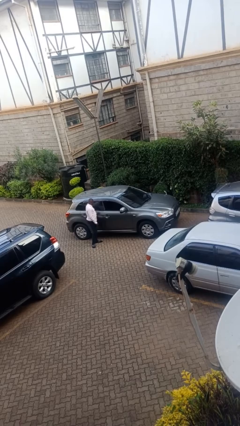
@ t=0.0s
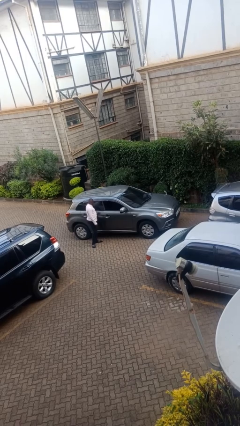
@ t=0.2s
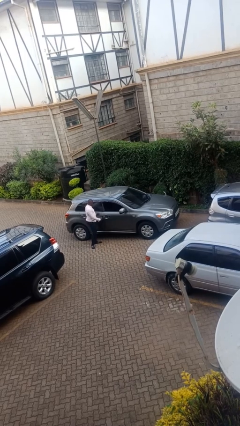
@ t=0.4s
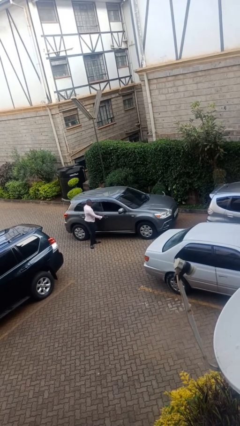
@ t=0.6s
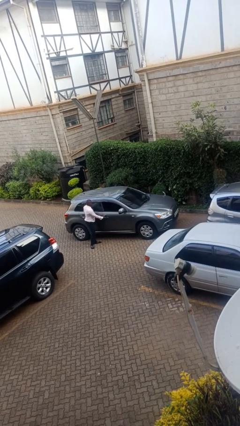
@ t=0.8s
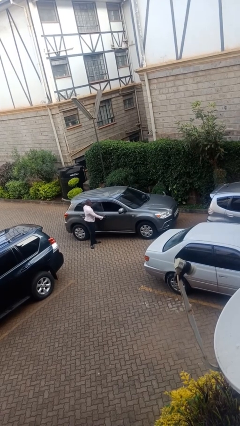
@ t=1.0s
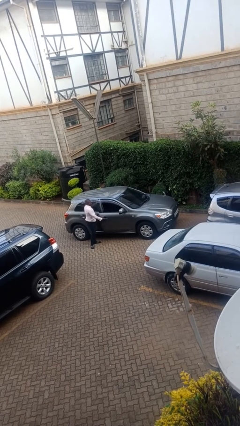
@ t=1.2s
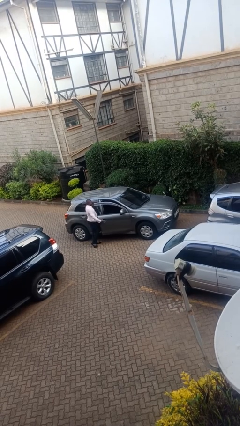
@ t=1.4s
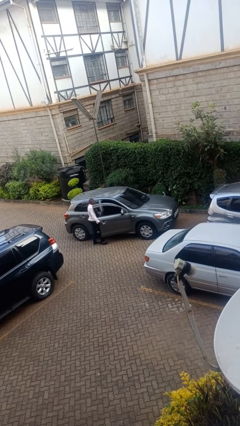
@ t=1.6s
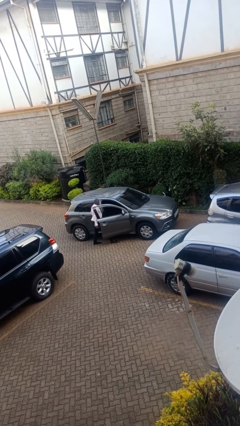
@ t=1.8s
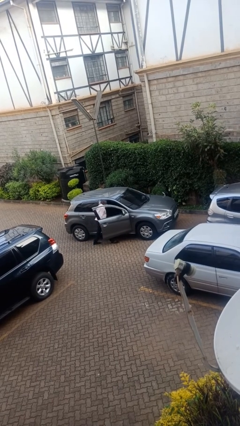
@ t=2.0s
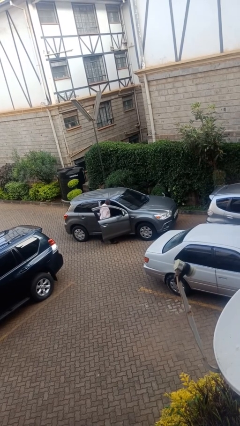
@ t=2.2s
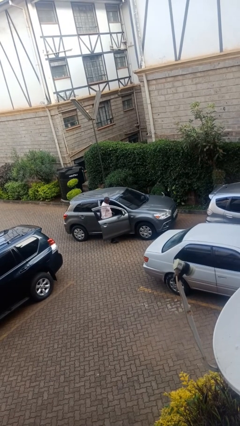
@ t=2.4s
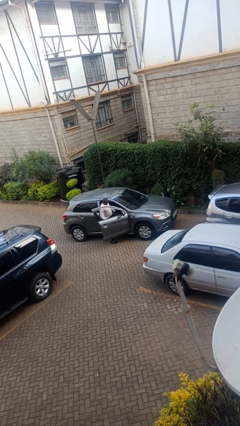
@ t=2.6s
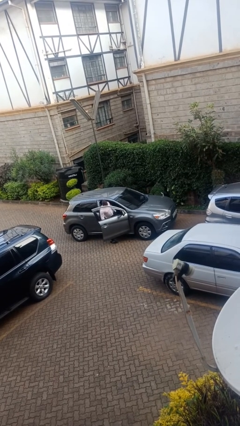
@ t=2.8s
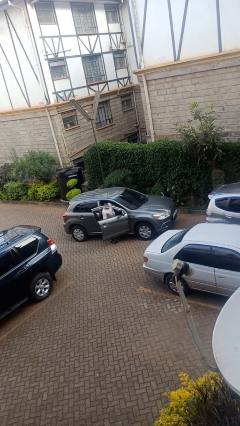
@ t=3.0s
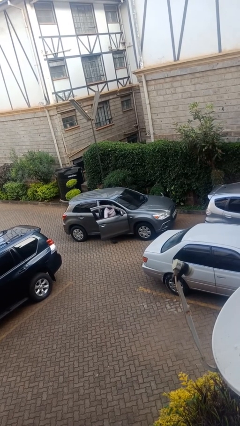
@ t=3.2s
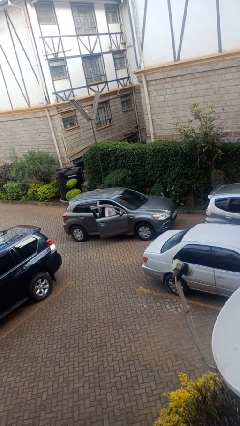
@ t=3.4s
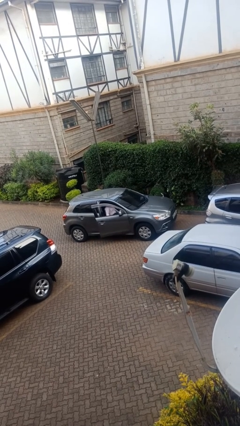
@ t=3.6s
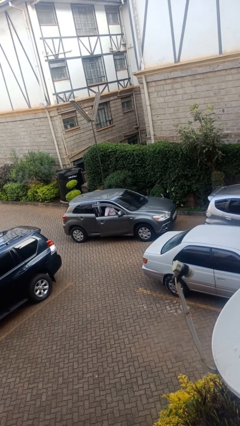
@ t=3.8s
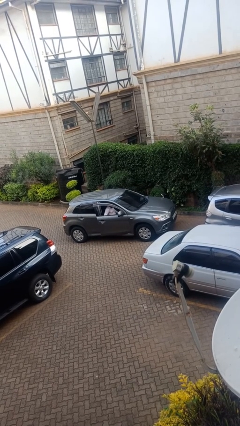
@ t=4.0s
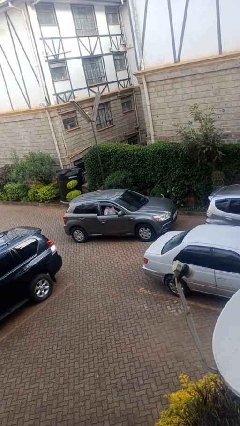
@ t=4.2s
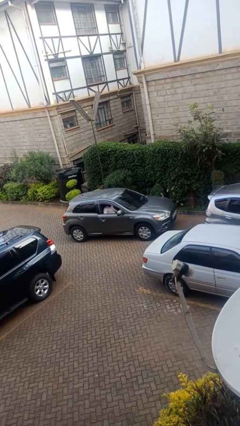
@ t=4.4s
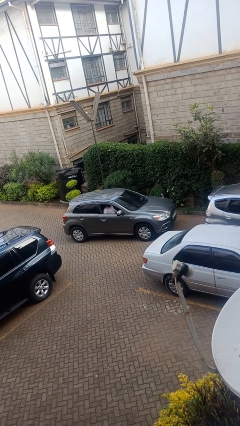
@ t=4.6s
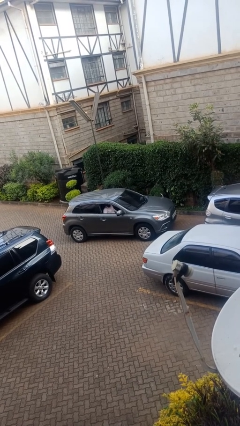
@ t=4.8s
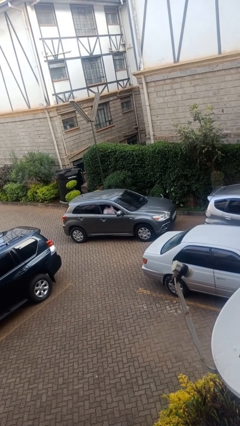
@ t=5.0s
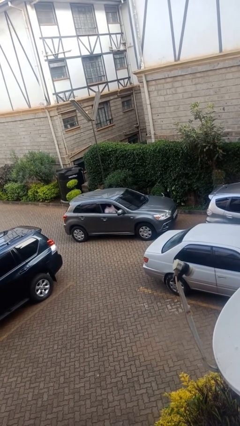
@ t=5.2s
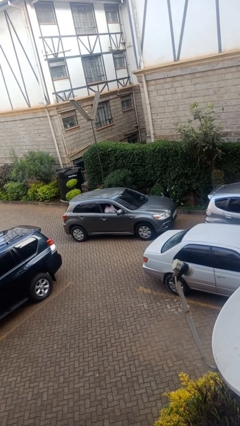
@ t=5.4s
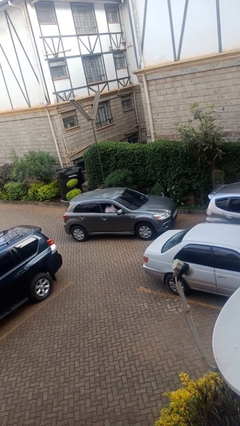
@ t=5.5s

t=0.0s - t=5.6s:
car picks up person

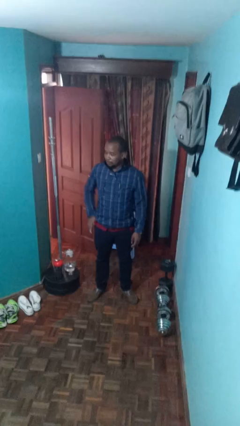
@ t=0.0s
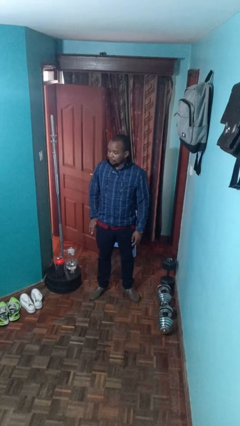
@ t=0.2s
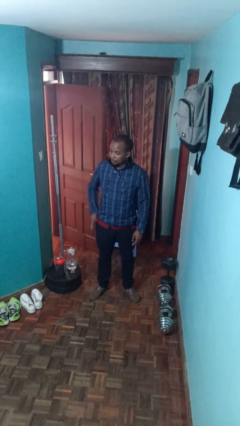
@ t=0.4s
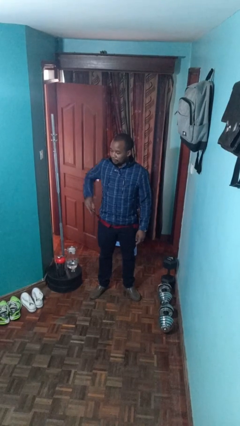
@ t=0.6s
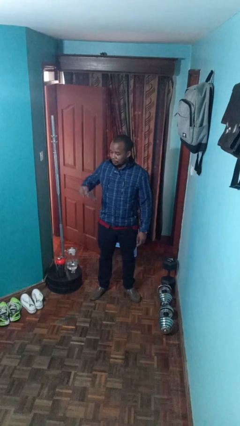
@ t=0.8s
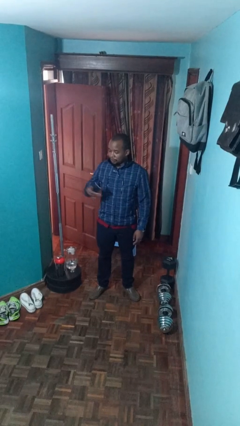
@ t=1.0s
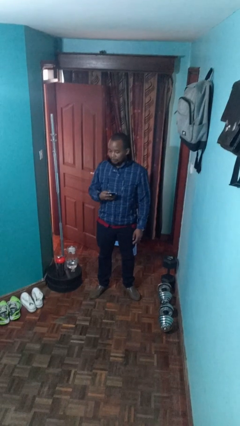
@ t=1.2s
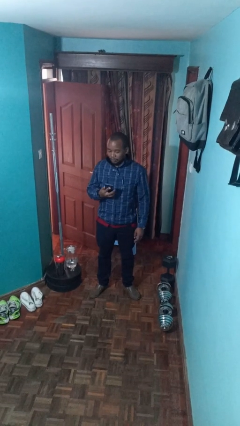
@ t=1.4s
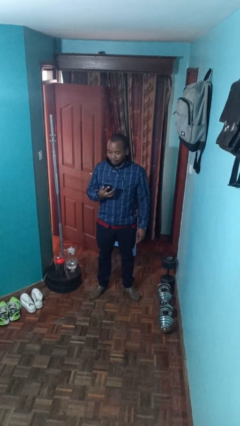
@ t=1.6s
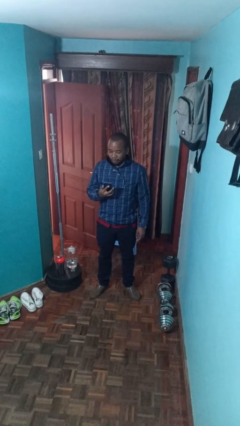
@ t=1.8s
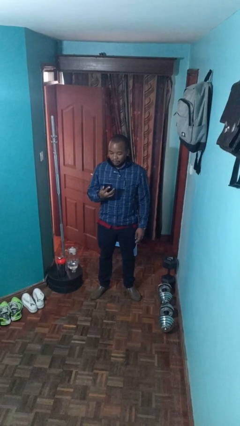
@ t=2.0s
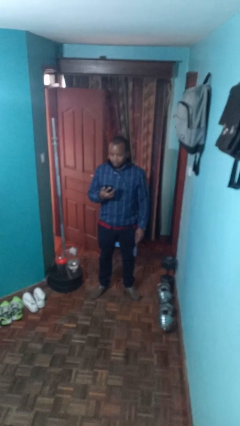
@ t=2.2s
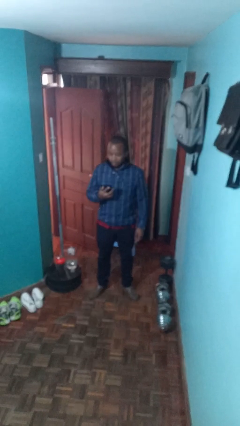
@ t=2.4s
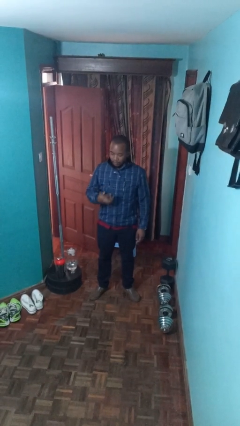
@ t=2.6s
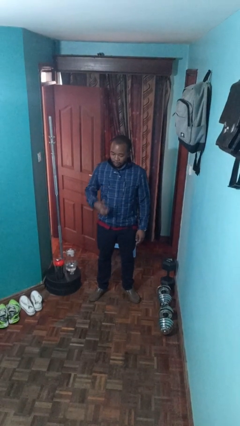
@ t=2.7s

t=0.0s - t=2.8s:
person takes phone from pocket

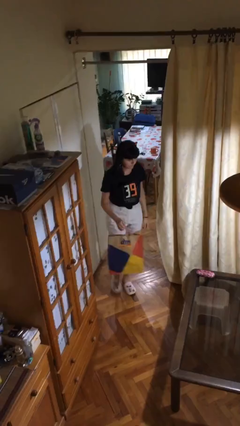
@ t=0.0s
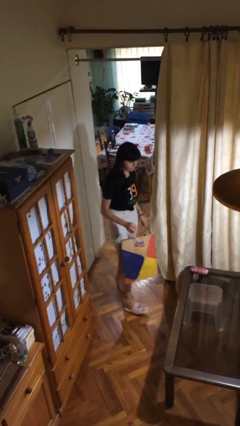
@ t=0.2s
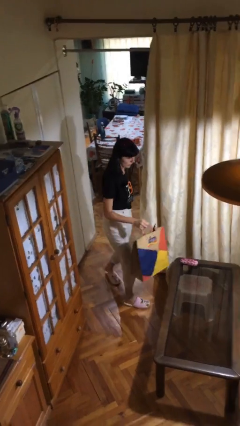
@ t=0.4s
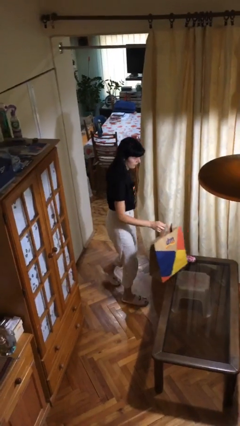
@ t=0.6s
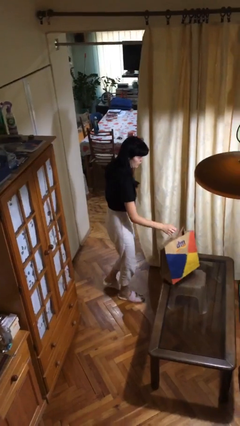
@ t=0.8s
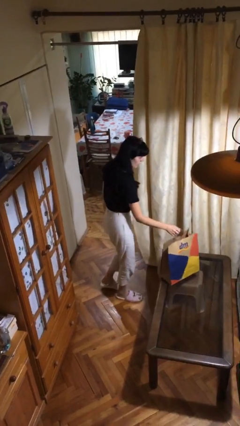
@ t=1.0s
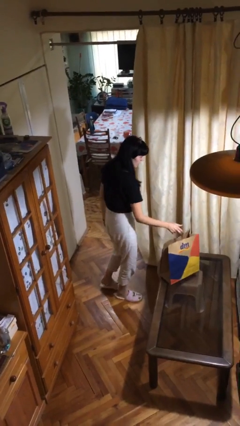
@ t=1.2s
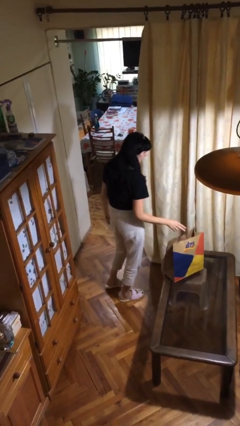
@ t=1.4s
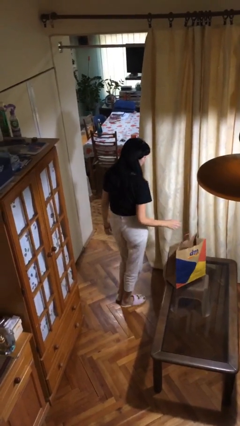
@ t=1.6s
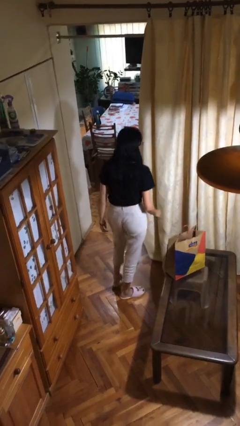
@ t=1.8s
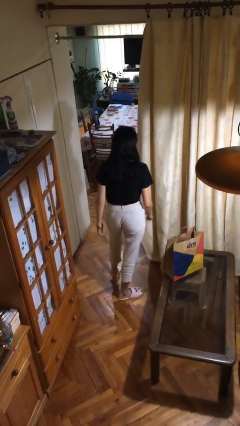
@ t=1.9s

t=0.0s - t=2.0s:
person puts down object on table

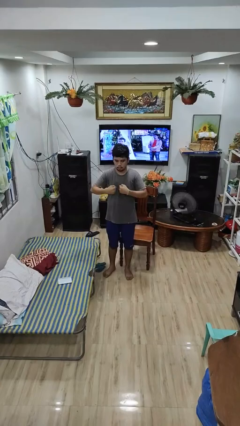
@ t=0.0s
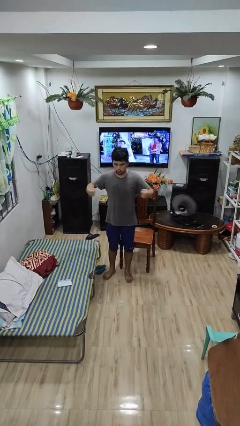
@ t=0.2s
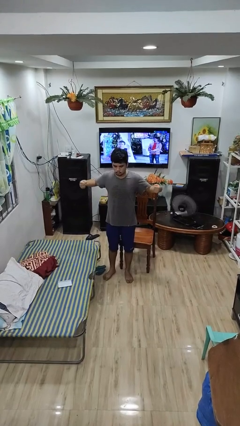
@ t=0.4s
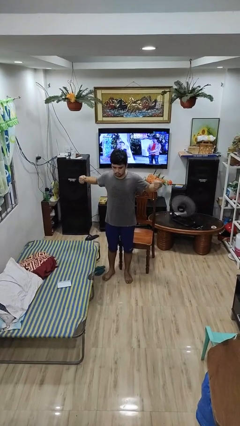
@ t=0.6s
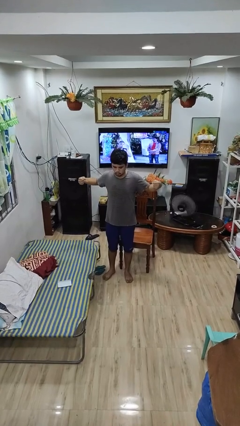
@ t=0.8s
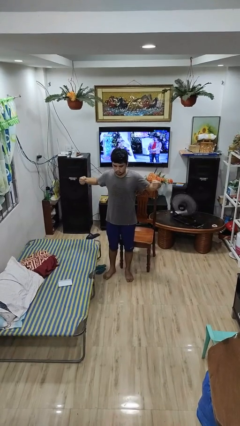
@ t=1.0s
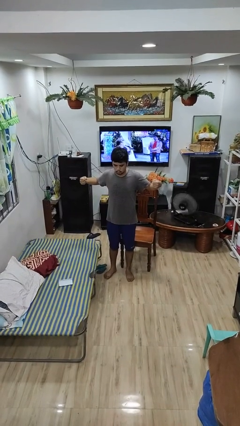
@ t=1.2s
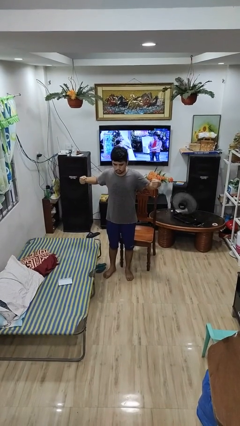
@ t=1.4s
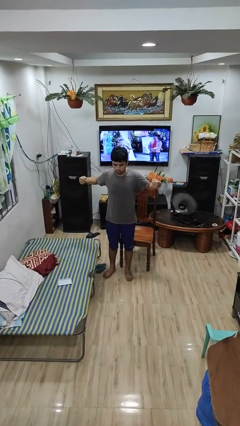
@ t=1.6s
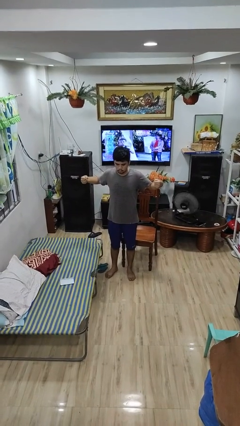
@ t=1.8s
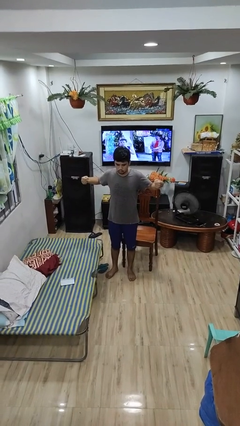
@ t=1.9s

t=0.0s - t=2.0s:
person gestures zoom in

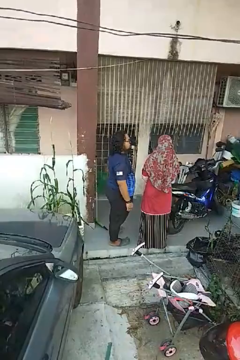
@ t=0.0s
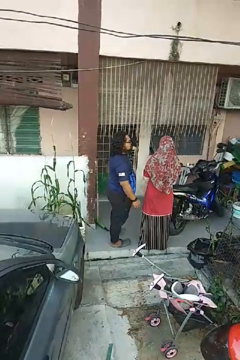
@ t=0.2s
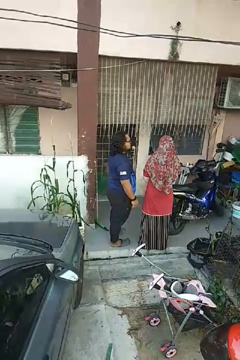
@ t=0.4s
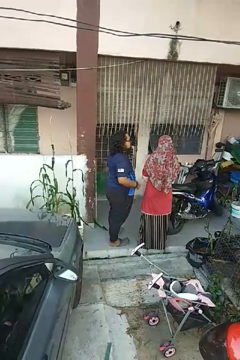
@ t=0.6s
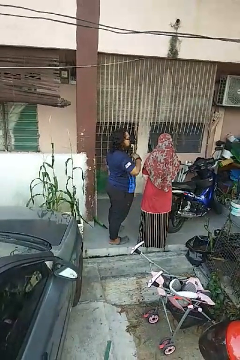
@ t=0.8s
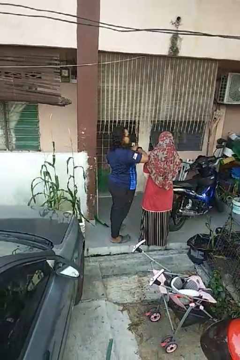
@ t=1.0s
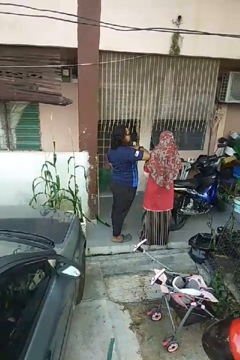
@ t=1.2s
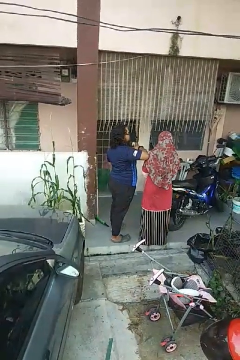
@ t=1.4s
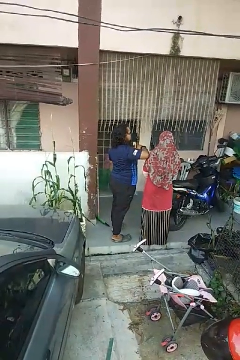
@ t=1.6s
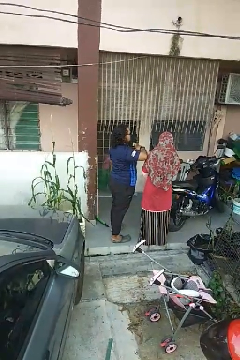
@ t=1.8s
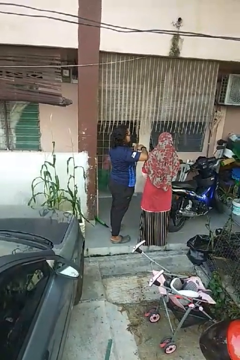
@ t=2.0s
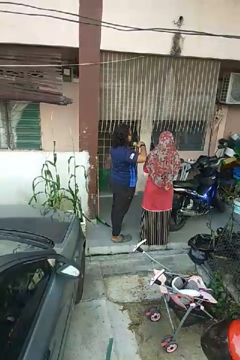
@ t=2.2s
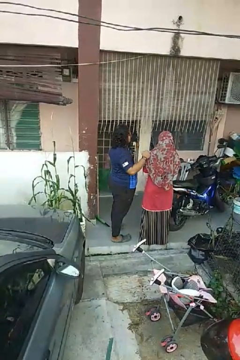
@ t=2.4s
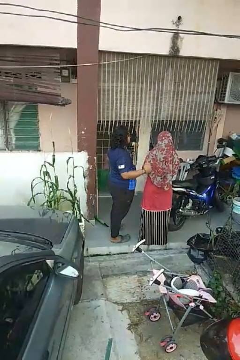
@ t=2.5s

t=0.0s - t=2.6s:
person nudges person with elbow

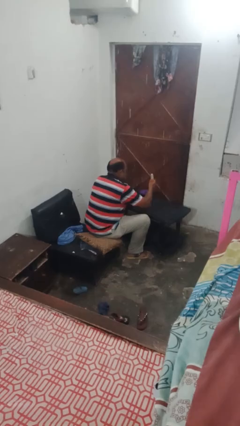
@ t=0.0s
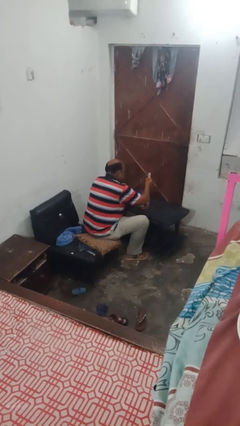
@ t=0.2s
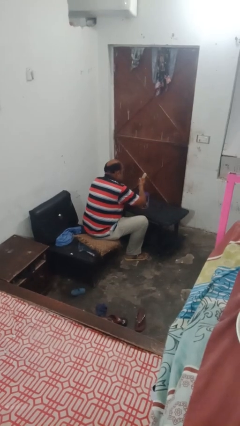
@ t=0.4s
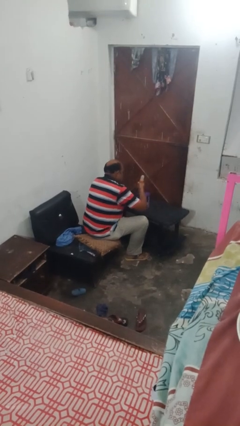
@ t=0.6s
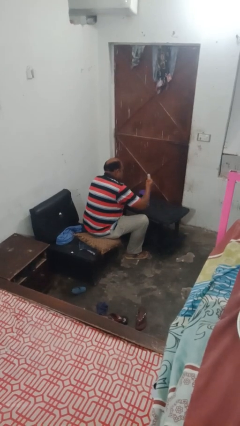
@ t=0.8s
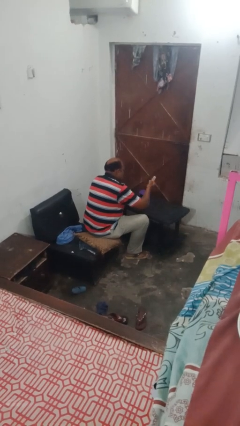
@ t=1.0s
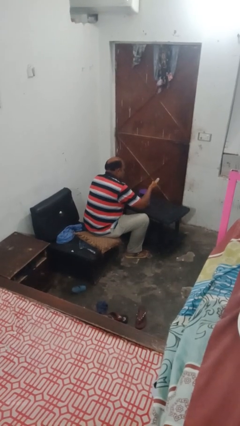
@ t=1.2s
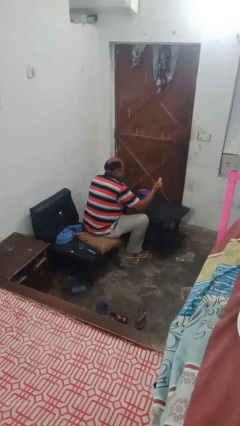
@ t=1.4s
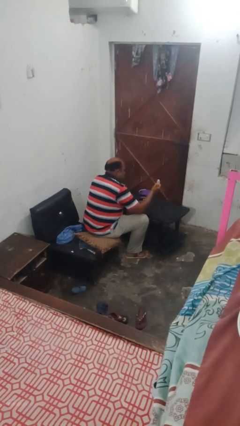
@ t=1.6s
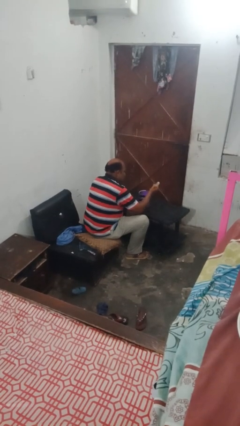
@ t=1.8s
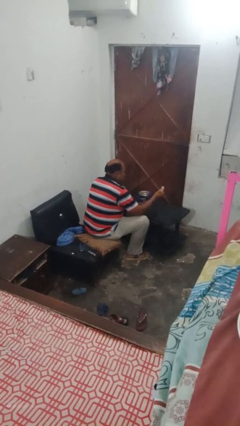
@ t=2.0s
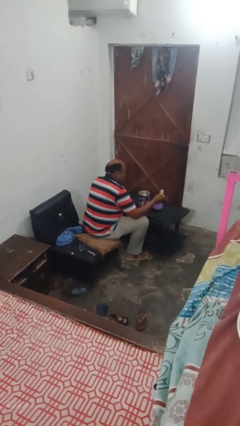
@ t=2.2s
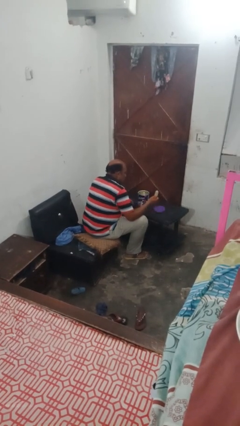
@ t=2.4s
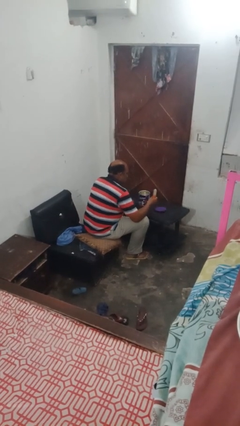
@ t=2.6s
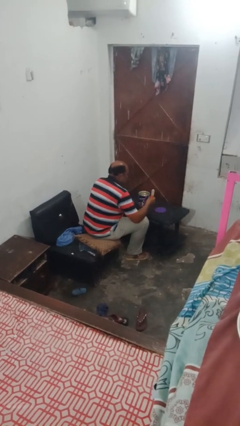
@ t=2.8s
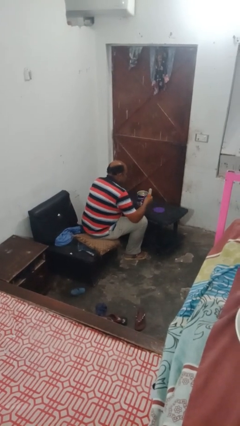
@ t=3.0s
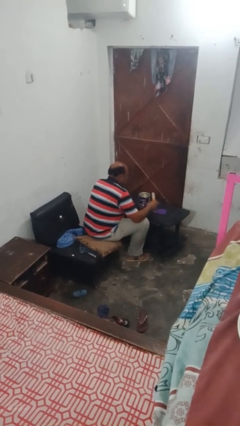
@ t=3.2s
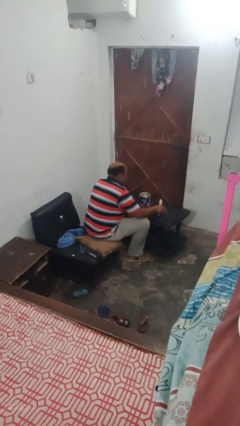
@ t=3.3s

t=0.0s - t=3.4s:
person opens can with can opener
